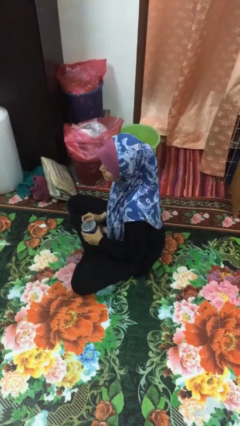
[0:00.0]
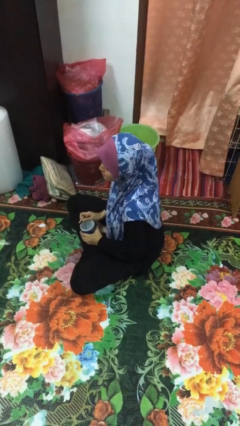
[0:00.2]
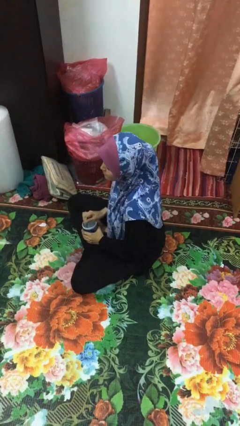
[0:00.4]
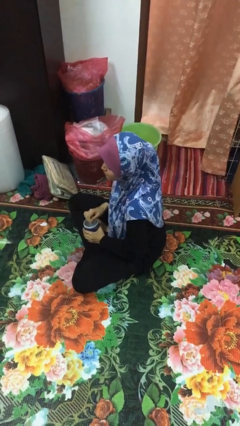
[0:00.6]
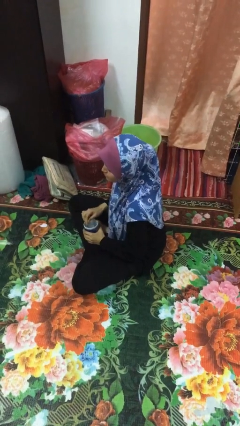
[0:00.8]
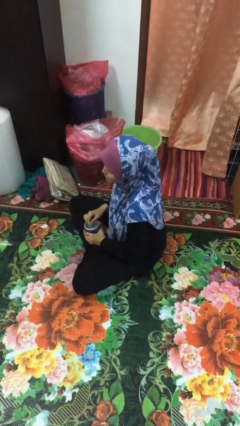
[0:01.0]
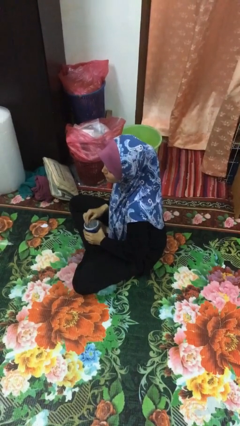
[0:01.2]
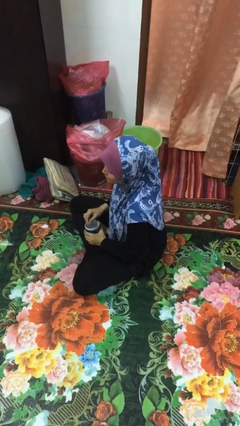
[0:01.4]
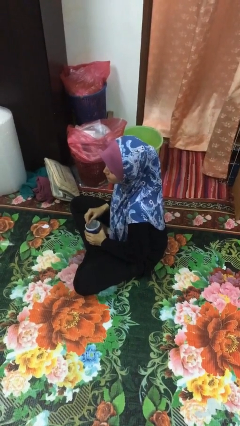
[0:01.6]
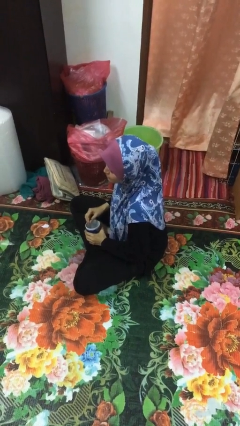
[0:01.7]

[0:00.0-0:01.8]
person stirs mug

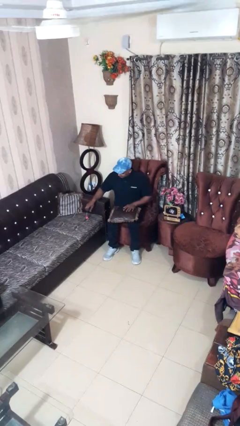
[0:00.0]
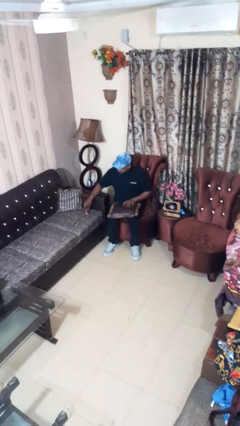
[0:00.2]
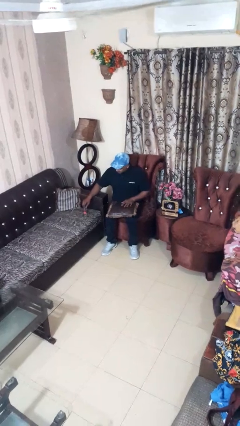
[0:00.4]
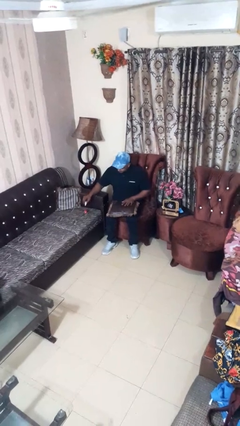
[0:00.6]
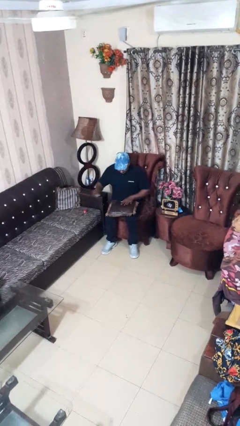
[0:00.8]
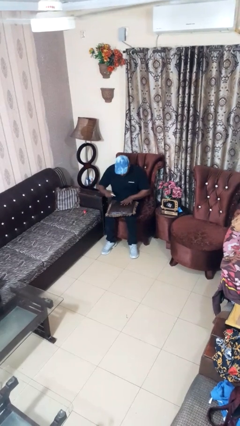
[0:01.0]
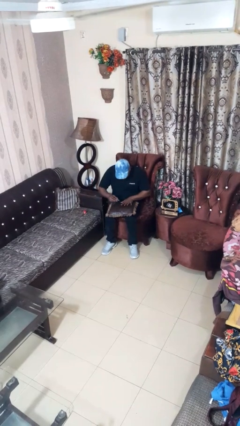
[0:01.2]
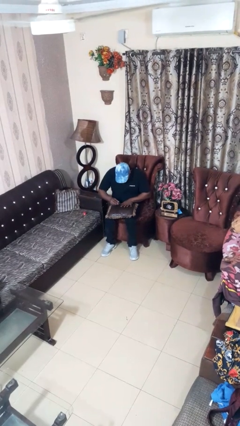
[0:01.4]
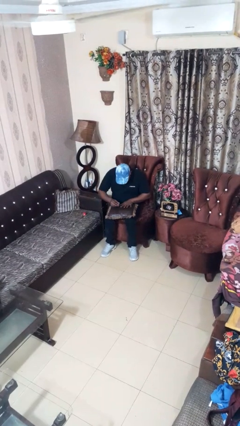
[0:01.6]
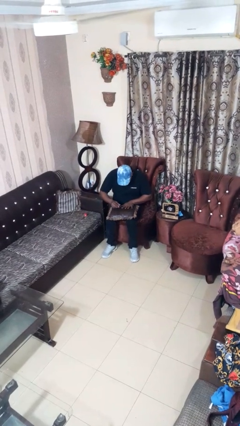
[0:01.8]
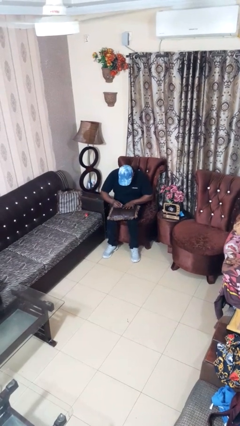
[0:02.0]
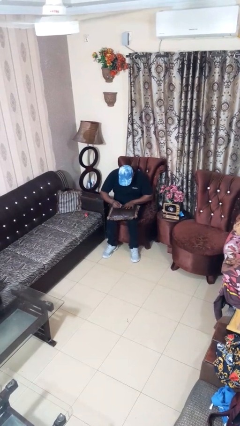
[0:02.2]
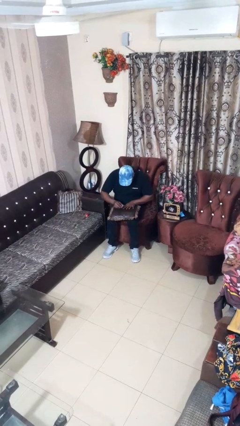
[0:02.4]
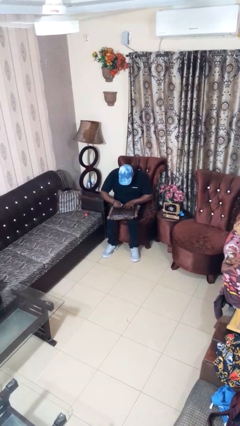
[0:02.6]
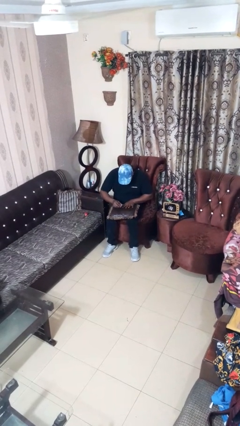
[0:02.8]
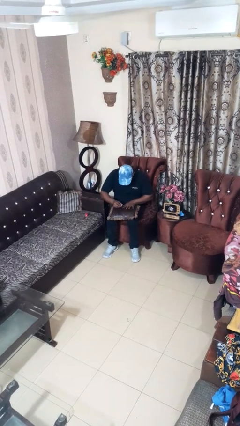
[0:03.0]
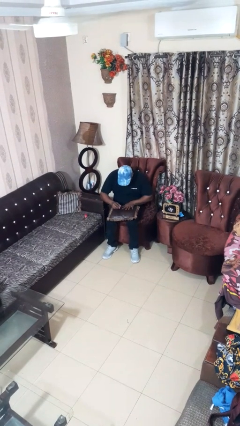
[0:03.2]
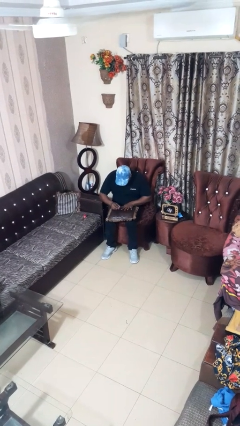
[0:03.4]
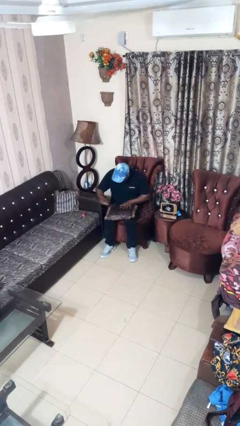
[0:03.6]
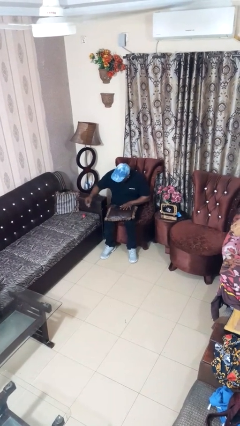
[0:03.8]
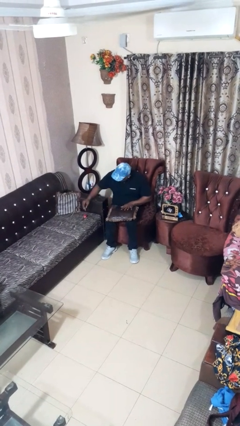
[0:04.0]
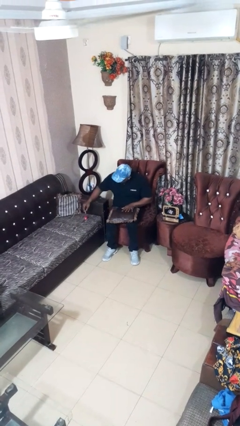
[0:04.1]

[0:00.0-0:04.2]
person paints fingernails

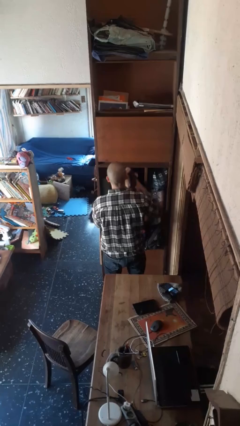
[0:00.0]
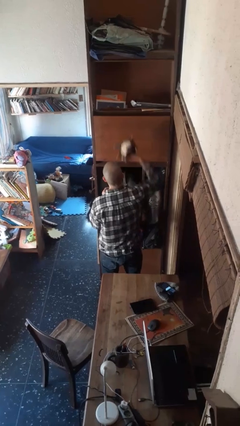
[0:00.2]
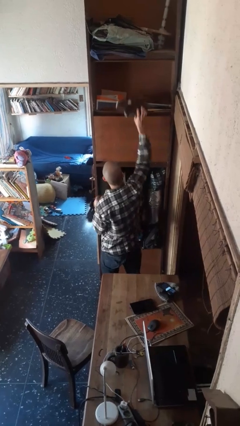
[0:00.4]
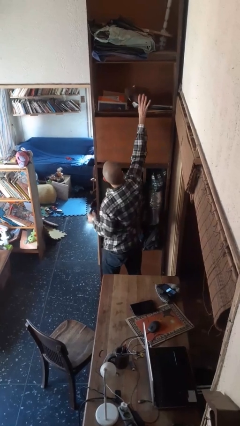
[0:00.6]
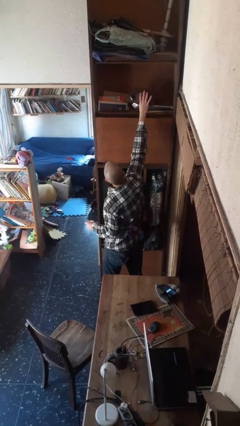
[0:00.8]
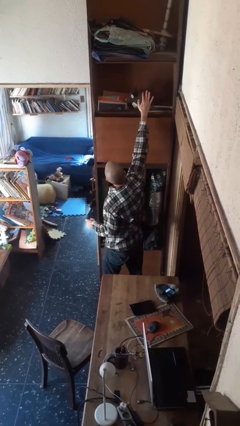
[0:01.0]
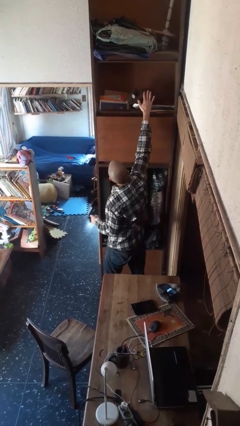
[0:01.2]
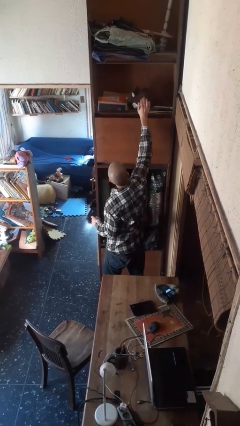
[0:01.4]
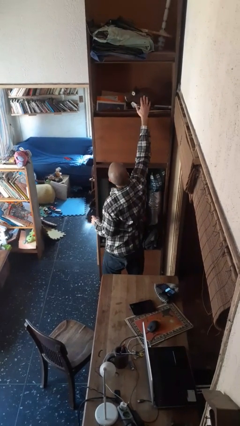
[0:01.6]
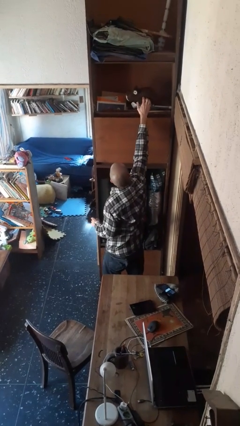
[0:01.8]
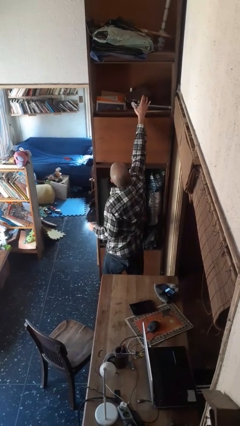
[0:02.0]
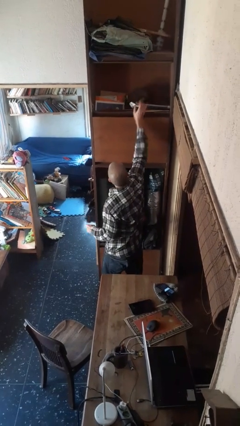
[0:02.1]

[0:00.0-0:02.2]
person puts down object on shelf

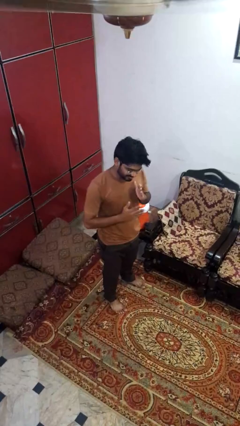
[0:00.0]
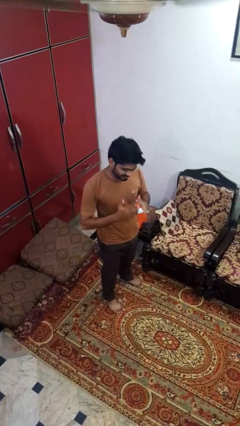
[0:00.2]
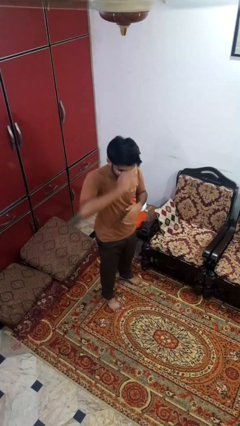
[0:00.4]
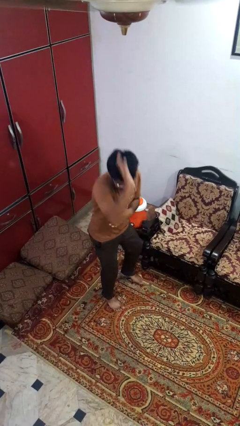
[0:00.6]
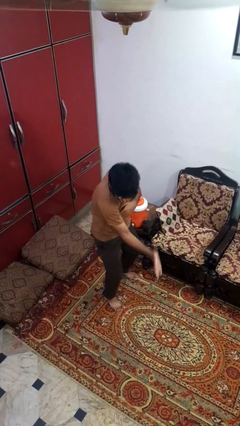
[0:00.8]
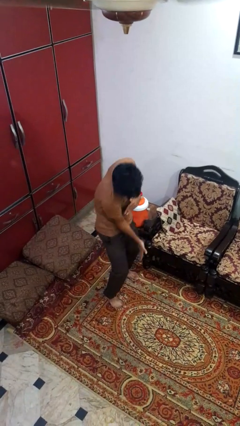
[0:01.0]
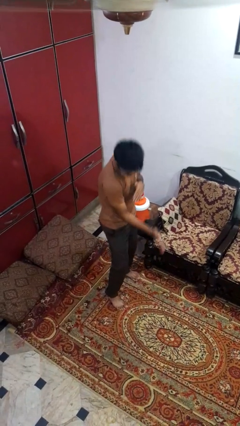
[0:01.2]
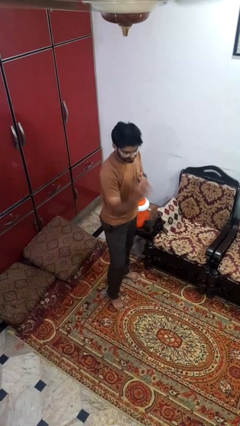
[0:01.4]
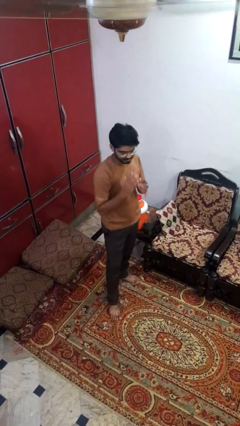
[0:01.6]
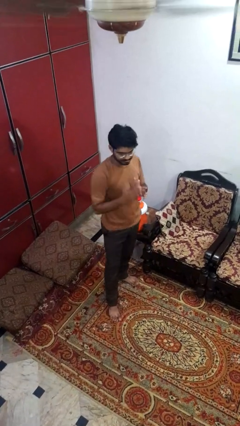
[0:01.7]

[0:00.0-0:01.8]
person karate chop

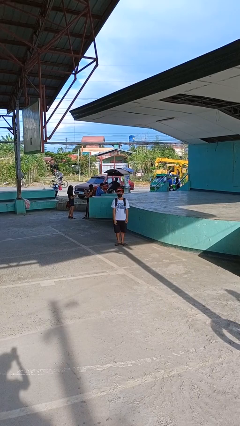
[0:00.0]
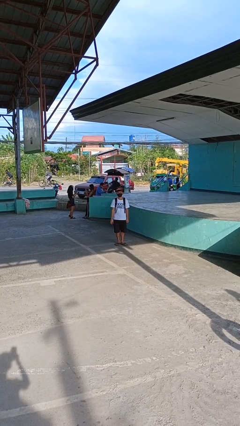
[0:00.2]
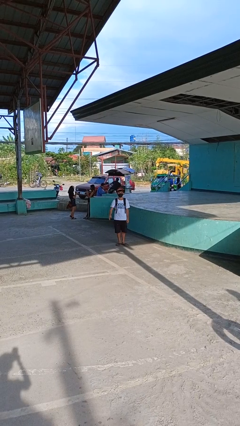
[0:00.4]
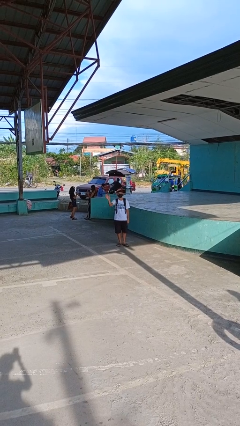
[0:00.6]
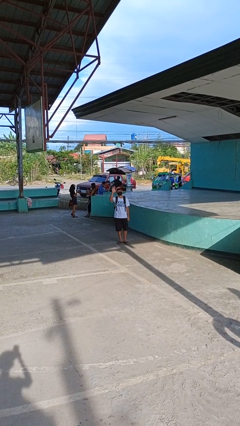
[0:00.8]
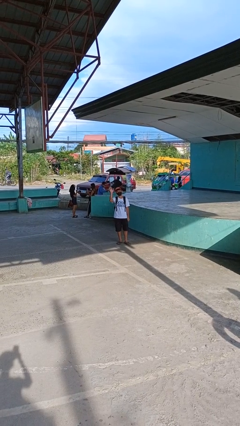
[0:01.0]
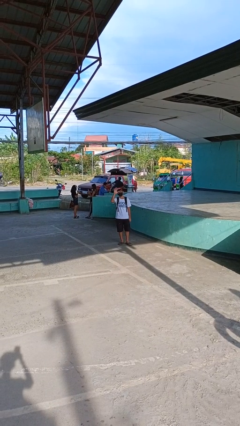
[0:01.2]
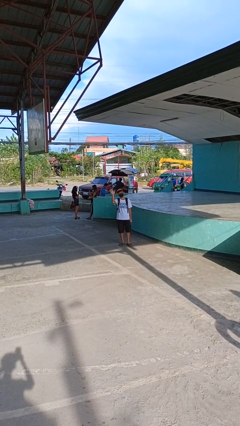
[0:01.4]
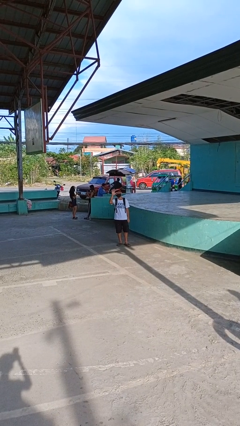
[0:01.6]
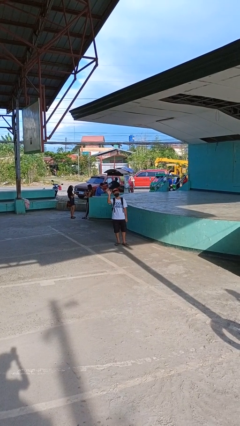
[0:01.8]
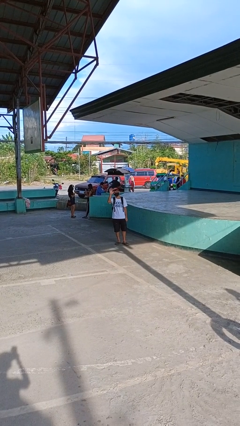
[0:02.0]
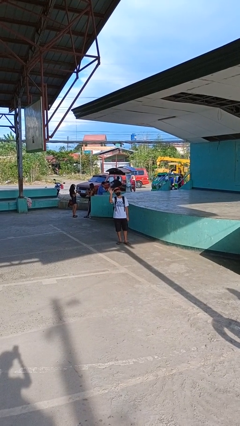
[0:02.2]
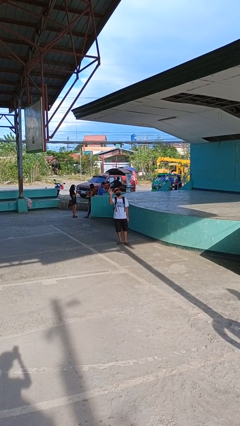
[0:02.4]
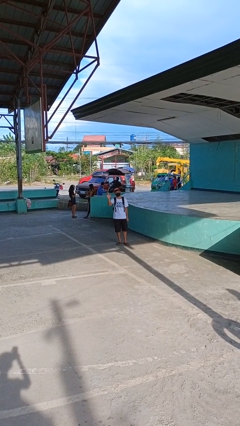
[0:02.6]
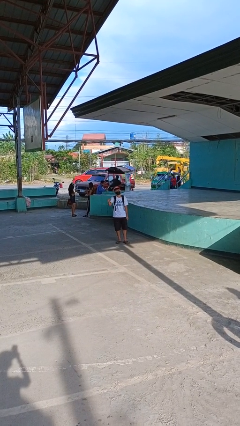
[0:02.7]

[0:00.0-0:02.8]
person waves at person

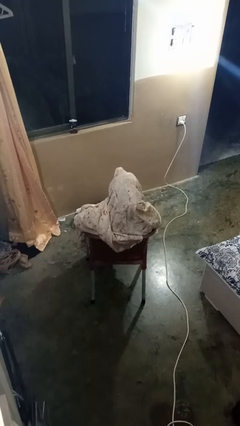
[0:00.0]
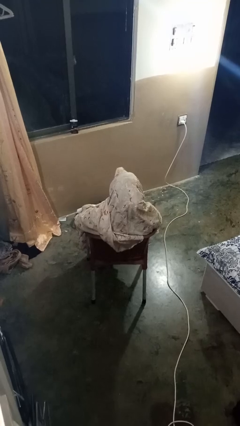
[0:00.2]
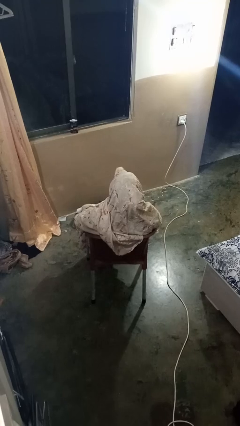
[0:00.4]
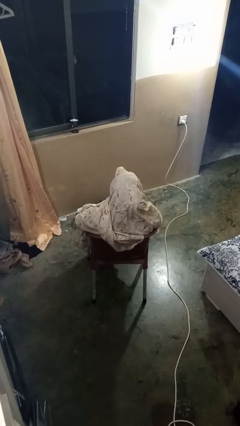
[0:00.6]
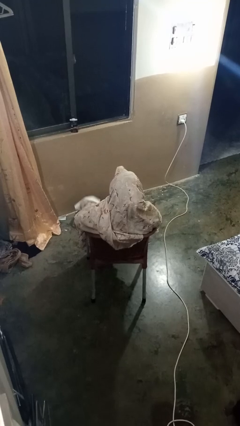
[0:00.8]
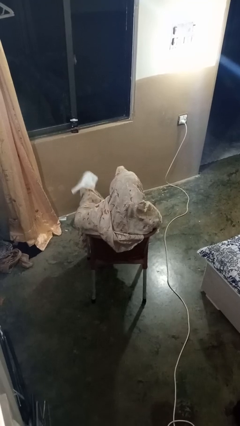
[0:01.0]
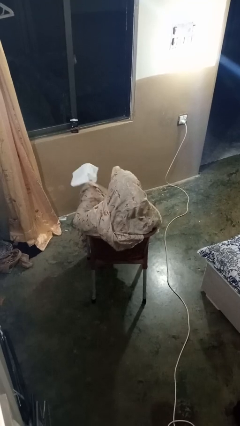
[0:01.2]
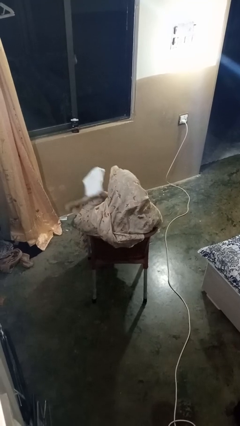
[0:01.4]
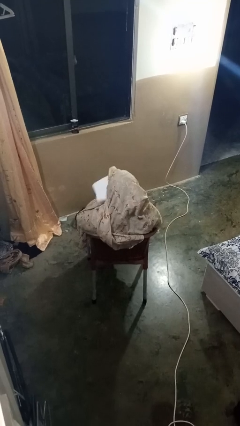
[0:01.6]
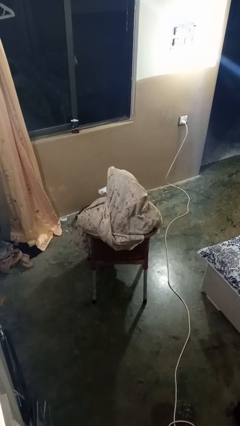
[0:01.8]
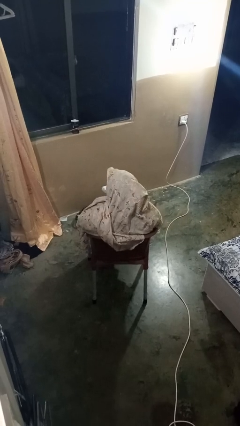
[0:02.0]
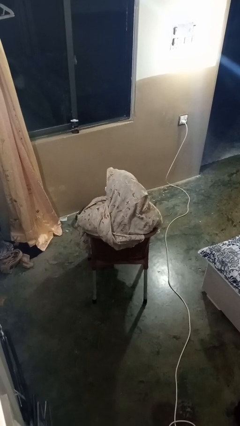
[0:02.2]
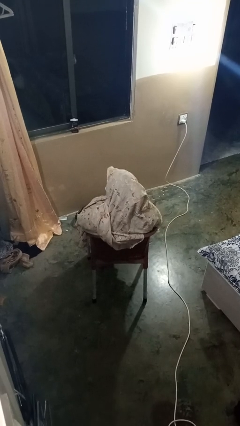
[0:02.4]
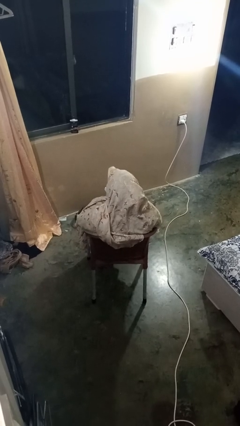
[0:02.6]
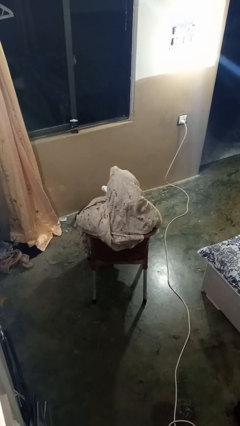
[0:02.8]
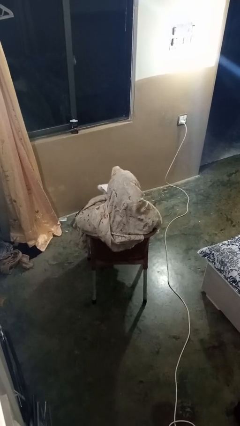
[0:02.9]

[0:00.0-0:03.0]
person wipes mouth with napkin

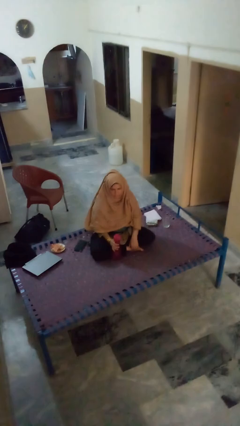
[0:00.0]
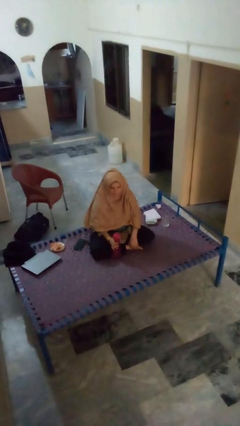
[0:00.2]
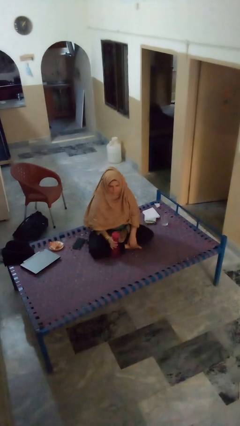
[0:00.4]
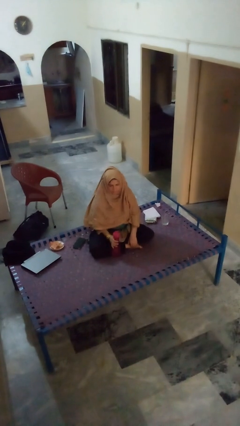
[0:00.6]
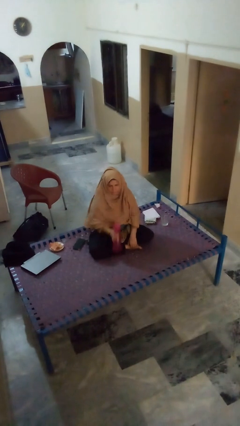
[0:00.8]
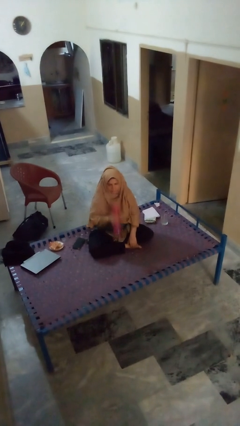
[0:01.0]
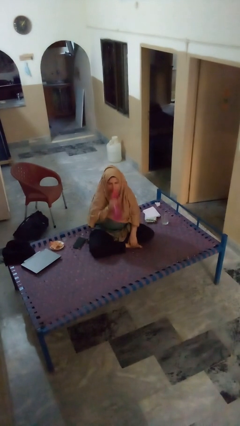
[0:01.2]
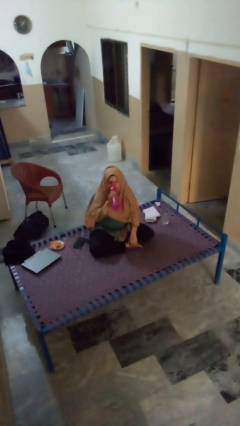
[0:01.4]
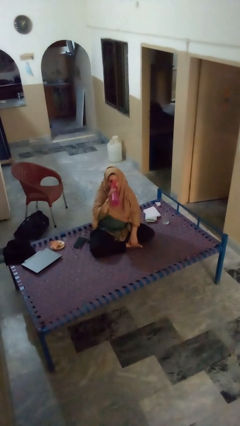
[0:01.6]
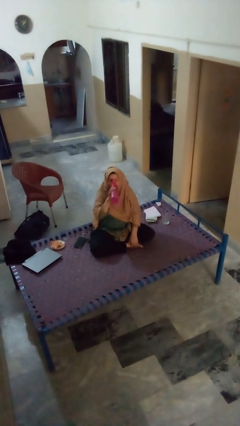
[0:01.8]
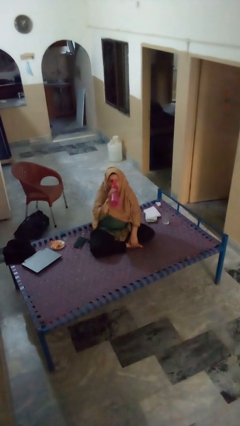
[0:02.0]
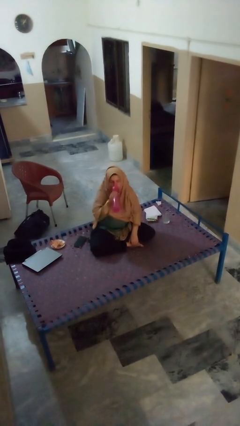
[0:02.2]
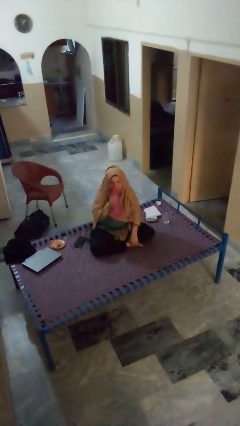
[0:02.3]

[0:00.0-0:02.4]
person drinks from bottle
